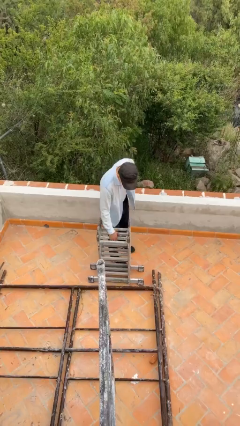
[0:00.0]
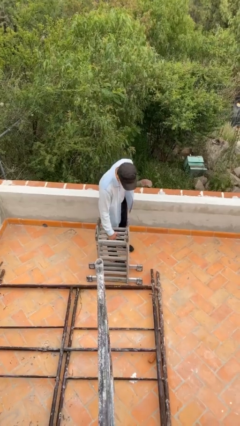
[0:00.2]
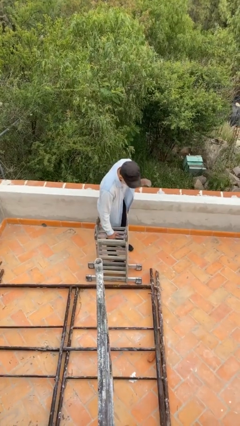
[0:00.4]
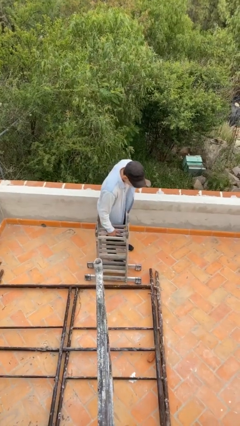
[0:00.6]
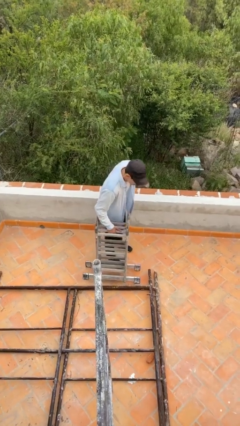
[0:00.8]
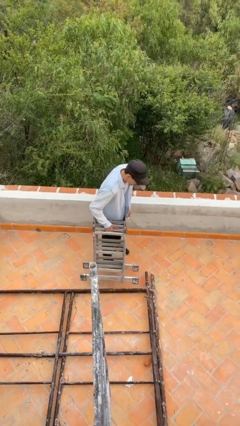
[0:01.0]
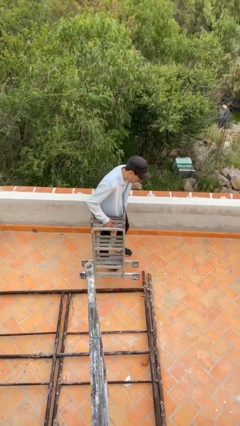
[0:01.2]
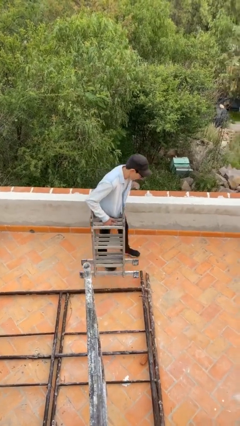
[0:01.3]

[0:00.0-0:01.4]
person picks up object from floor

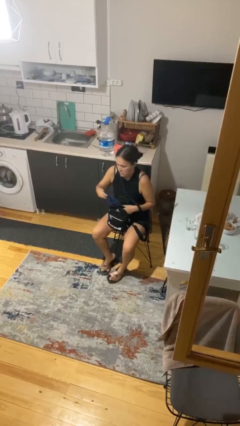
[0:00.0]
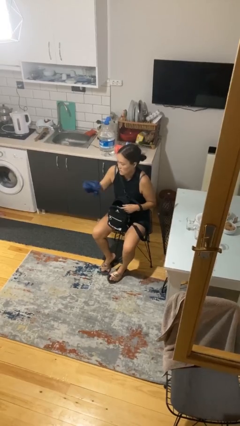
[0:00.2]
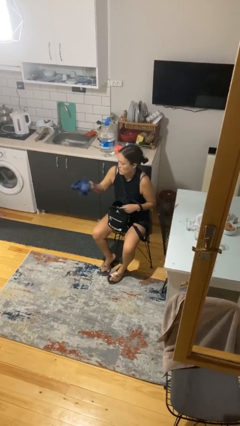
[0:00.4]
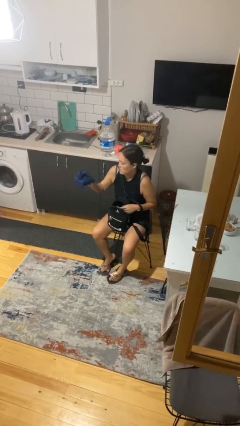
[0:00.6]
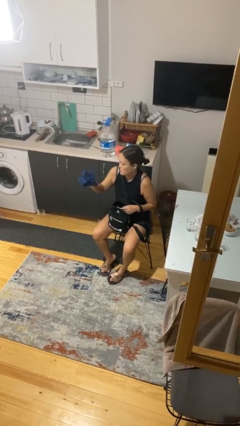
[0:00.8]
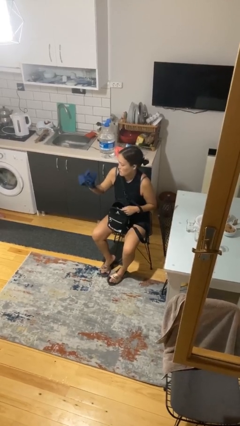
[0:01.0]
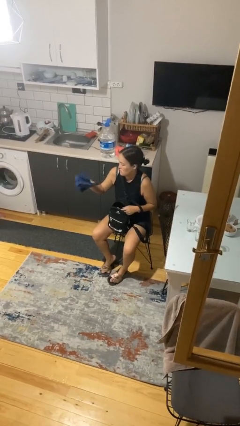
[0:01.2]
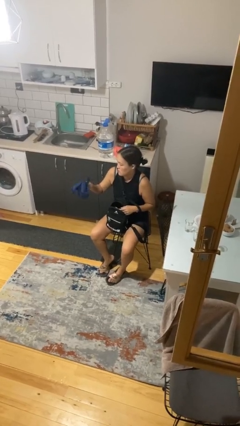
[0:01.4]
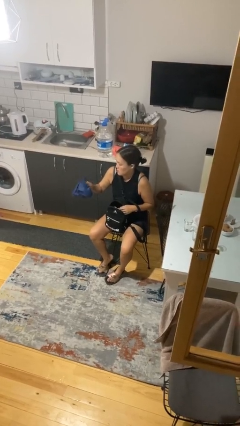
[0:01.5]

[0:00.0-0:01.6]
person takes object from backpack

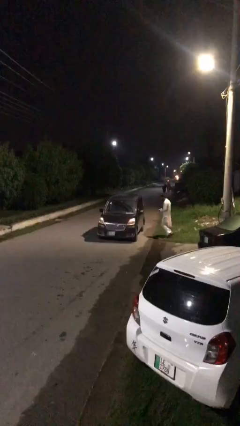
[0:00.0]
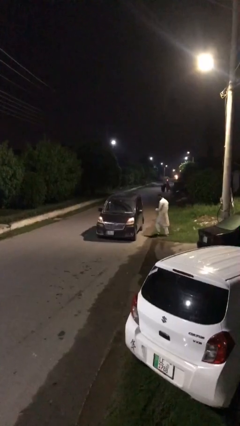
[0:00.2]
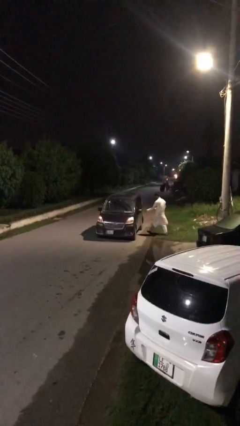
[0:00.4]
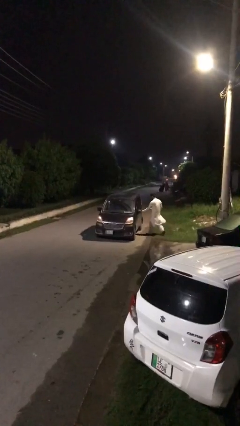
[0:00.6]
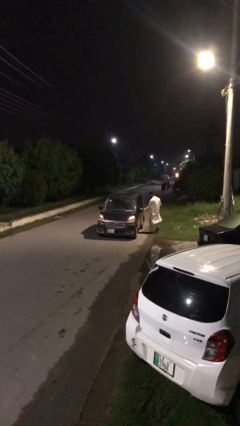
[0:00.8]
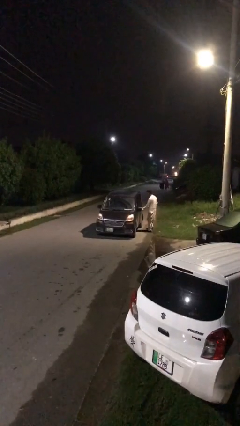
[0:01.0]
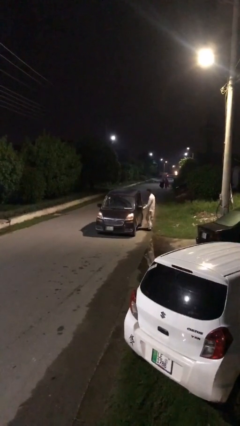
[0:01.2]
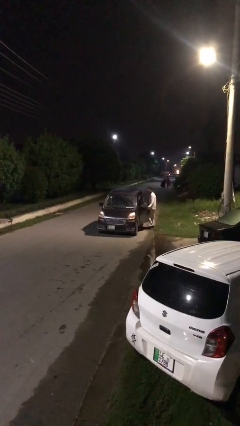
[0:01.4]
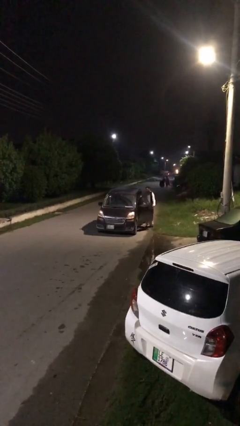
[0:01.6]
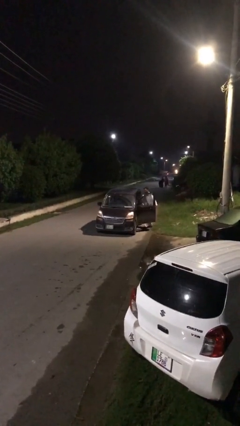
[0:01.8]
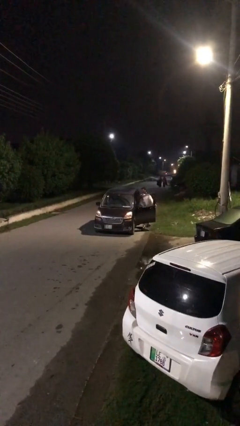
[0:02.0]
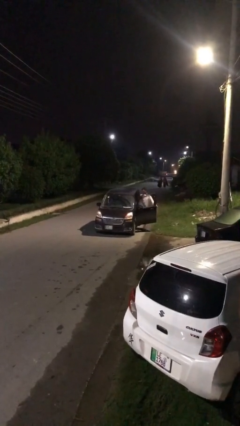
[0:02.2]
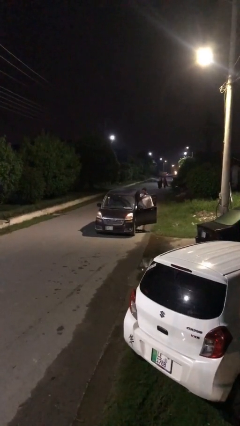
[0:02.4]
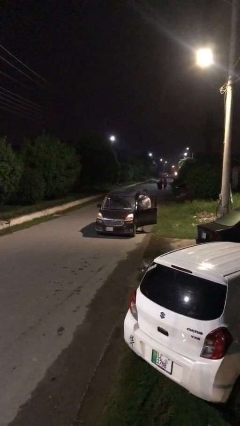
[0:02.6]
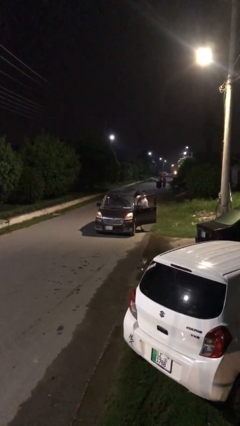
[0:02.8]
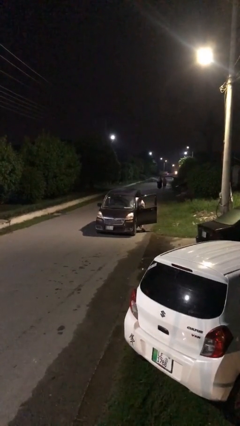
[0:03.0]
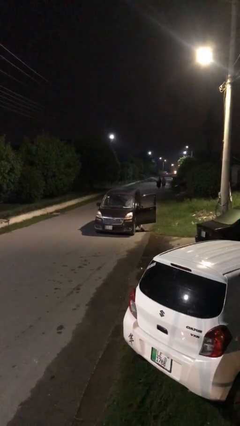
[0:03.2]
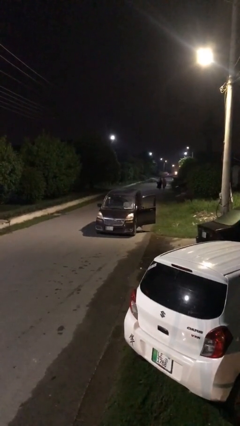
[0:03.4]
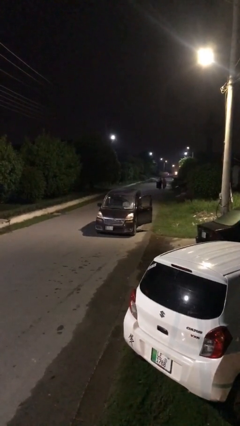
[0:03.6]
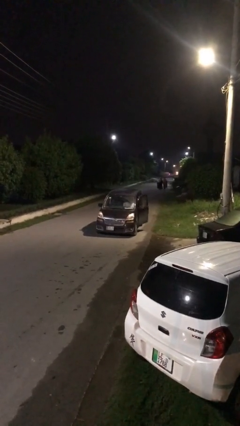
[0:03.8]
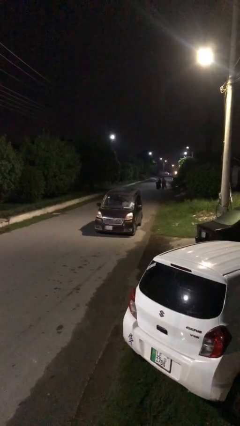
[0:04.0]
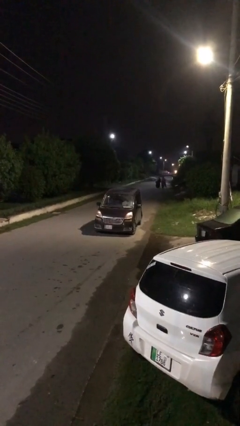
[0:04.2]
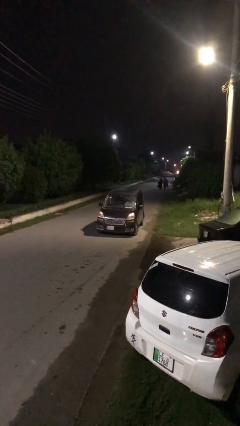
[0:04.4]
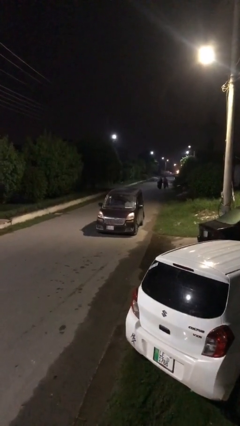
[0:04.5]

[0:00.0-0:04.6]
car picks up person

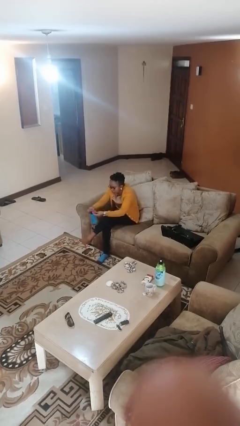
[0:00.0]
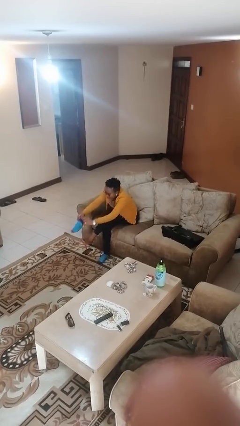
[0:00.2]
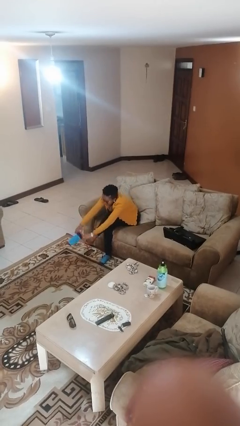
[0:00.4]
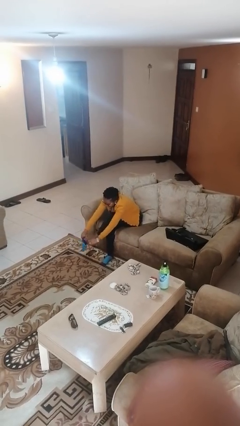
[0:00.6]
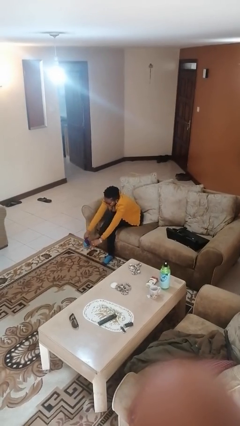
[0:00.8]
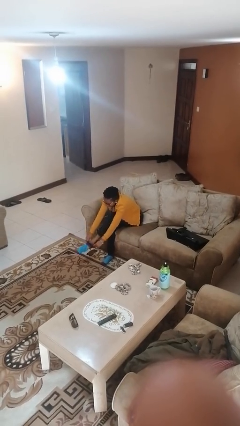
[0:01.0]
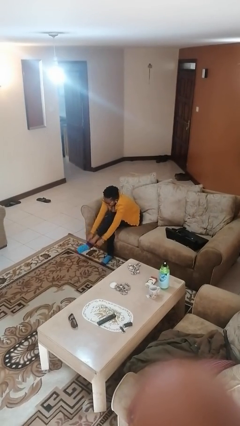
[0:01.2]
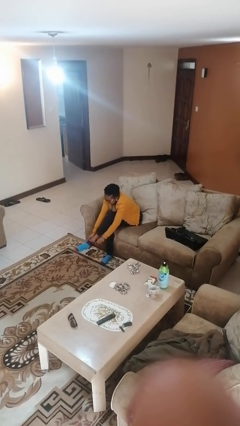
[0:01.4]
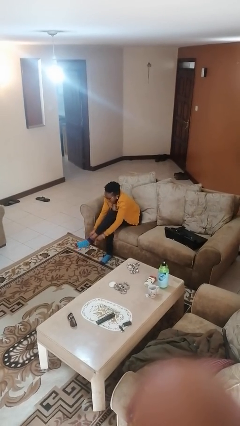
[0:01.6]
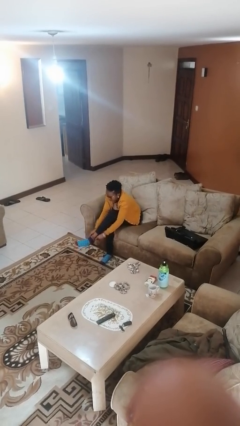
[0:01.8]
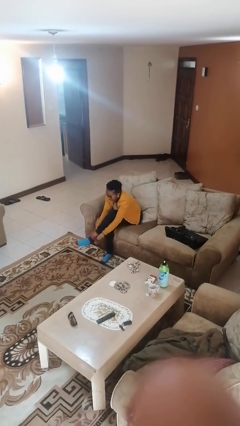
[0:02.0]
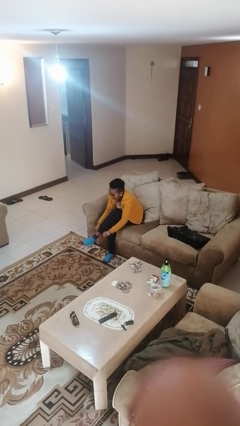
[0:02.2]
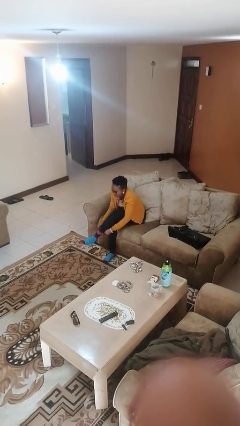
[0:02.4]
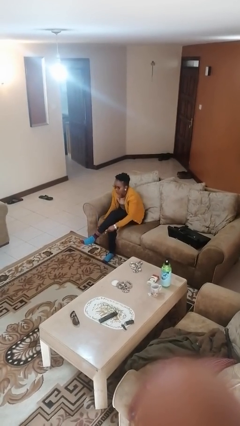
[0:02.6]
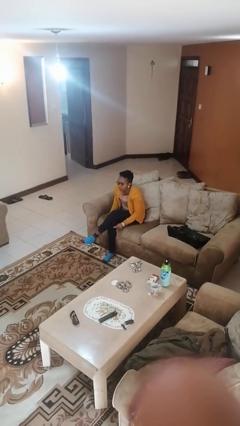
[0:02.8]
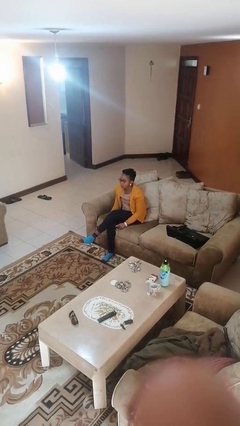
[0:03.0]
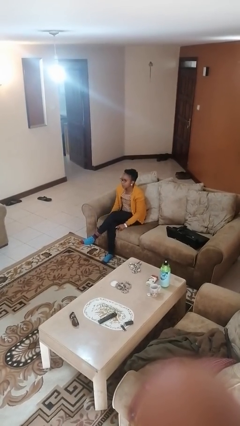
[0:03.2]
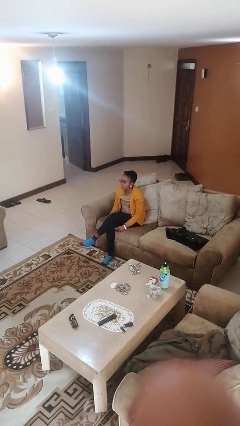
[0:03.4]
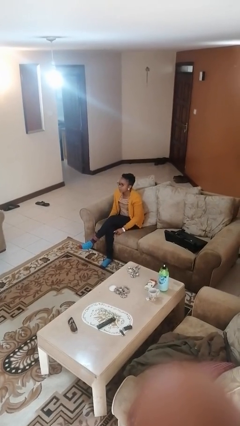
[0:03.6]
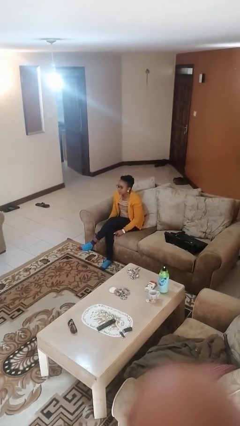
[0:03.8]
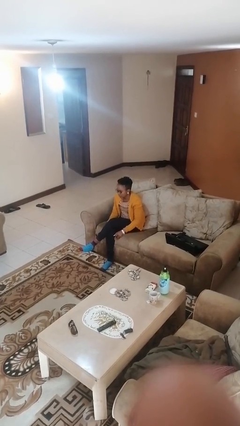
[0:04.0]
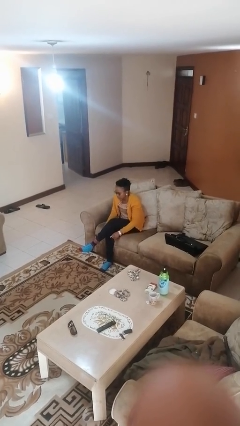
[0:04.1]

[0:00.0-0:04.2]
person puts on socks

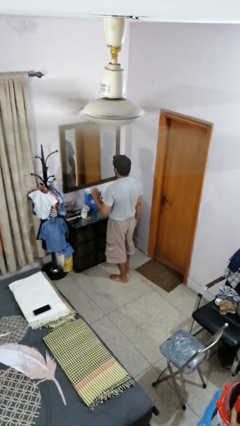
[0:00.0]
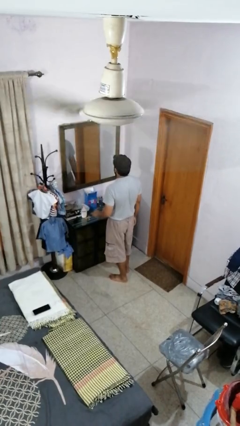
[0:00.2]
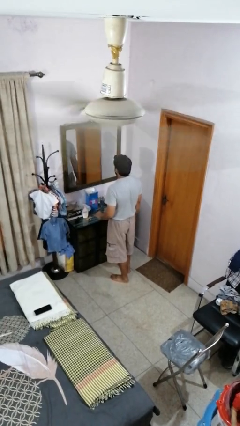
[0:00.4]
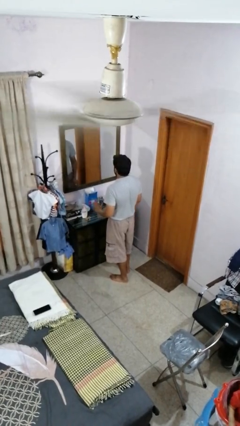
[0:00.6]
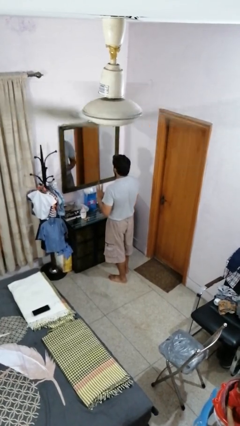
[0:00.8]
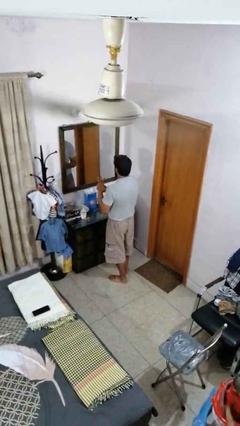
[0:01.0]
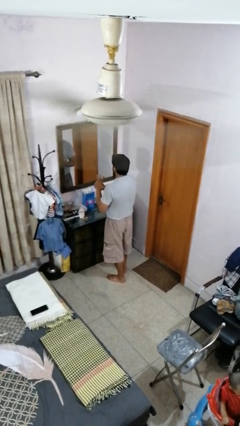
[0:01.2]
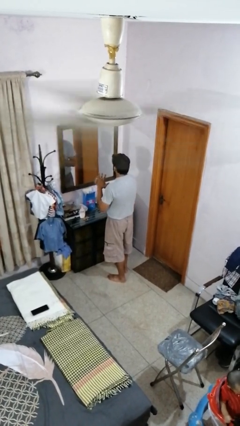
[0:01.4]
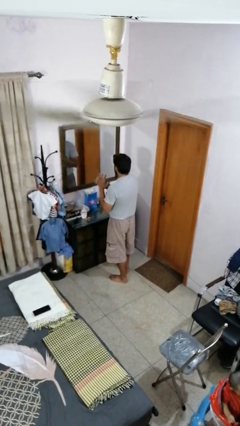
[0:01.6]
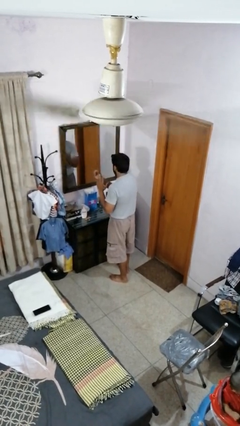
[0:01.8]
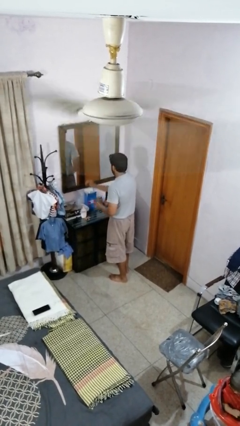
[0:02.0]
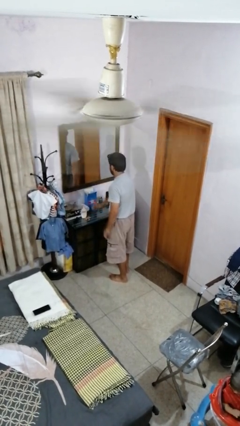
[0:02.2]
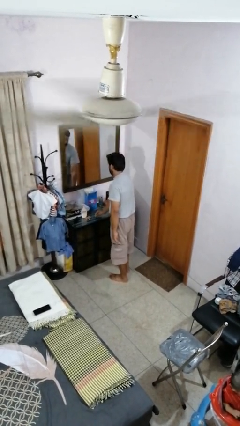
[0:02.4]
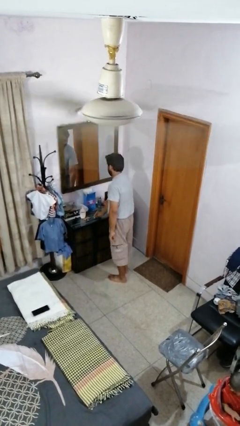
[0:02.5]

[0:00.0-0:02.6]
person takes off ring

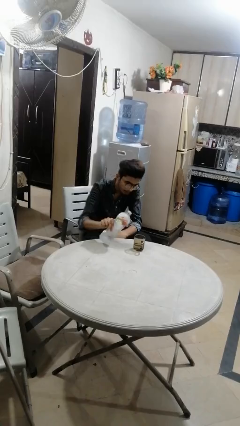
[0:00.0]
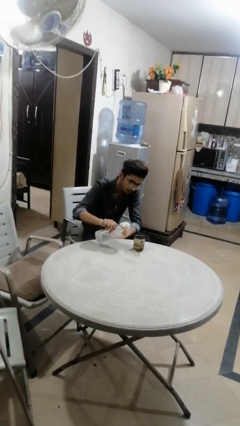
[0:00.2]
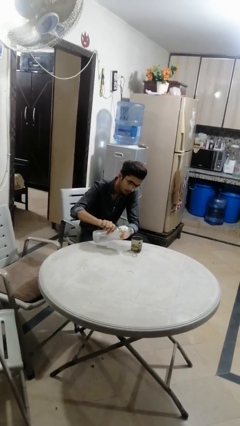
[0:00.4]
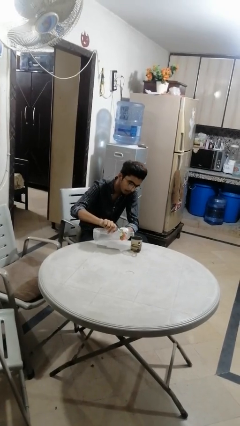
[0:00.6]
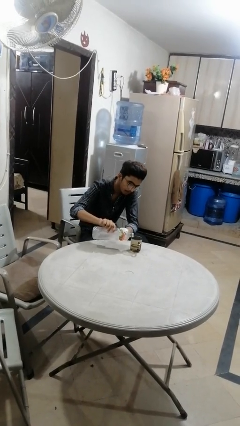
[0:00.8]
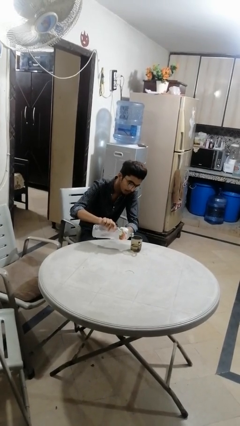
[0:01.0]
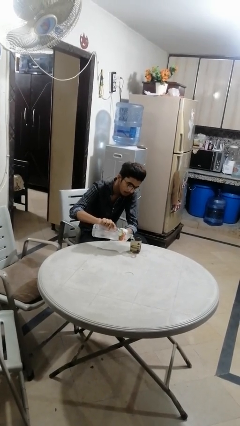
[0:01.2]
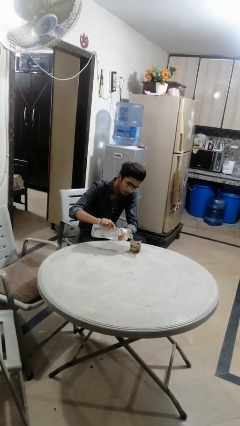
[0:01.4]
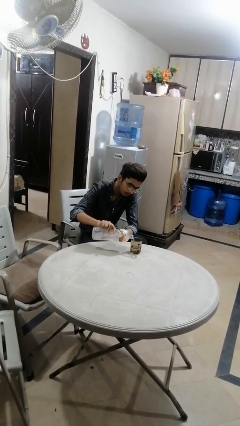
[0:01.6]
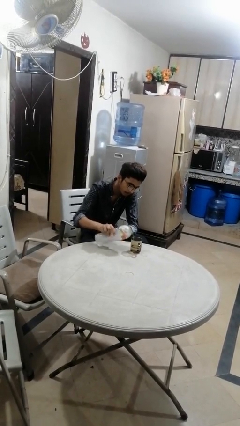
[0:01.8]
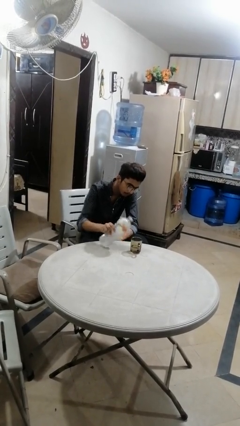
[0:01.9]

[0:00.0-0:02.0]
person pours liquid into cup

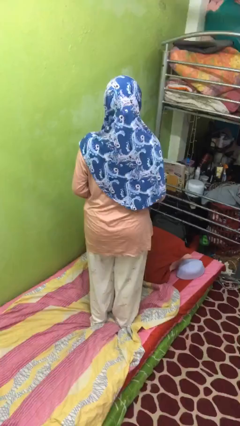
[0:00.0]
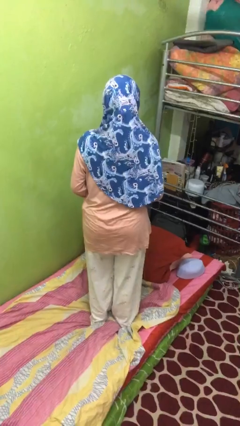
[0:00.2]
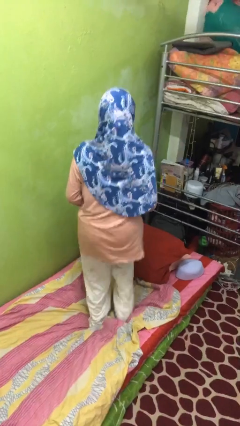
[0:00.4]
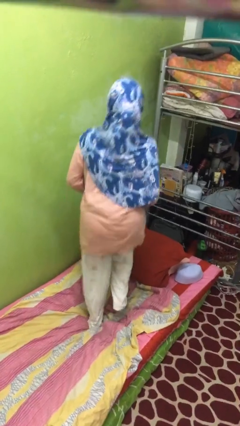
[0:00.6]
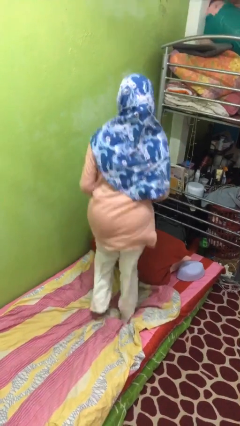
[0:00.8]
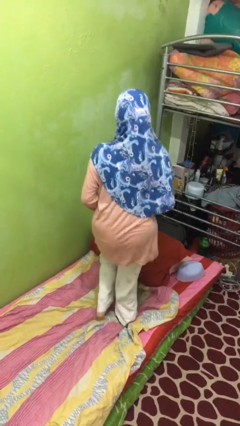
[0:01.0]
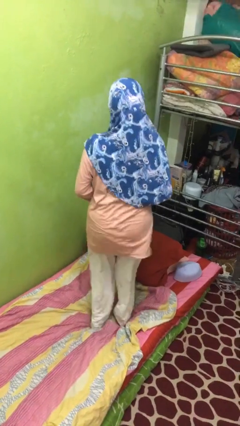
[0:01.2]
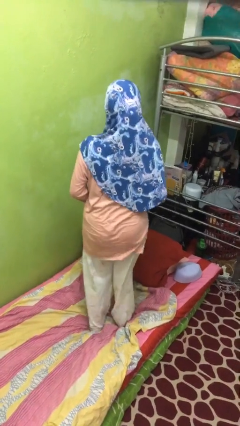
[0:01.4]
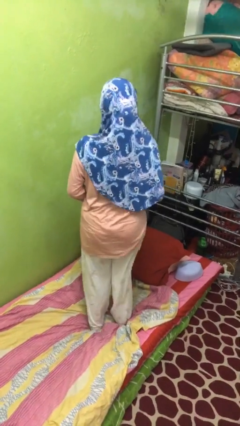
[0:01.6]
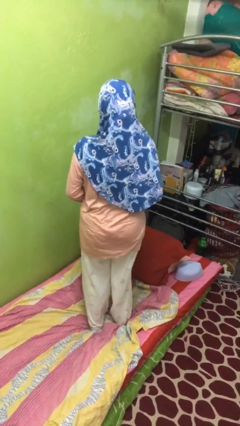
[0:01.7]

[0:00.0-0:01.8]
person jumps on bed
